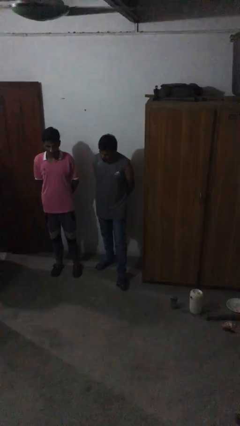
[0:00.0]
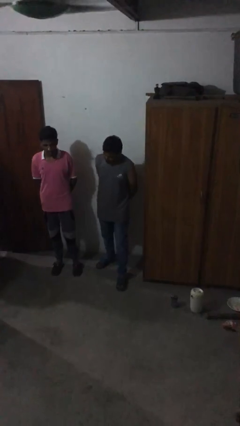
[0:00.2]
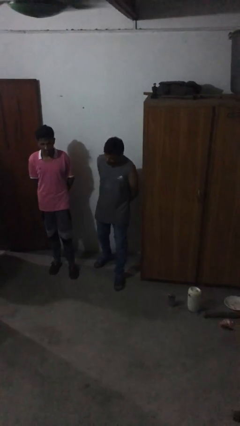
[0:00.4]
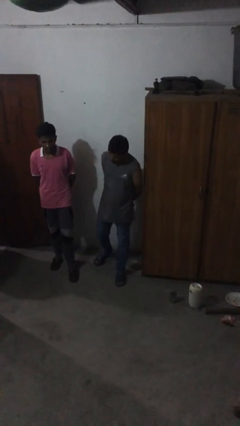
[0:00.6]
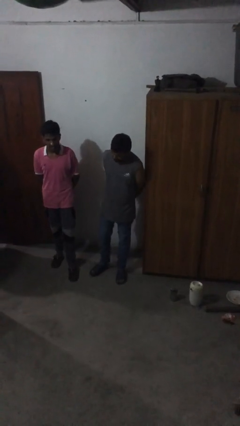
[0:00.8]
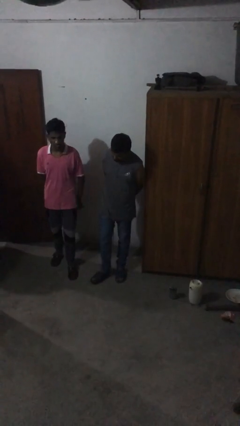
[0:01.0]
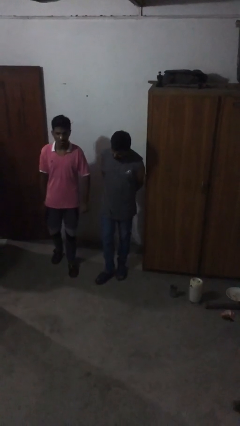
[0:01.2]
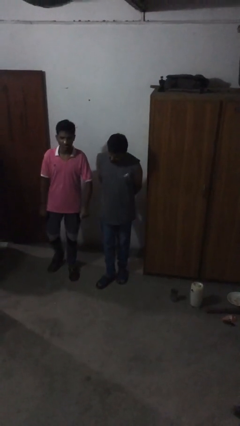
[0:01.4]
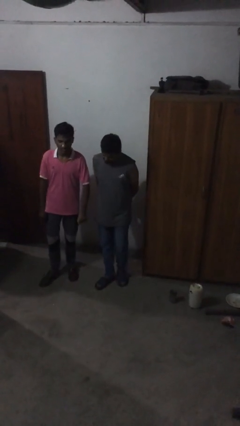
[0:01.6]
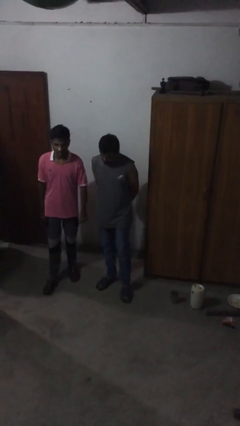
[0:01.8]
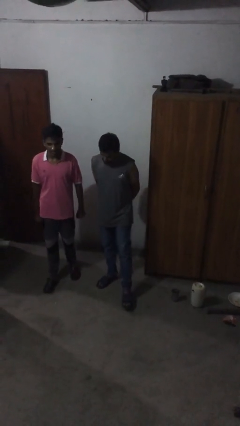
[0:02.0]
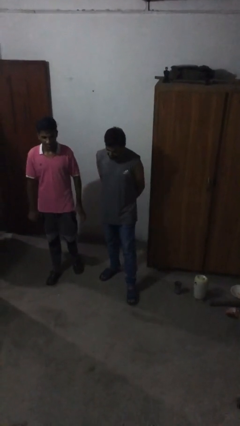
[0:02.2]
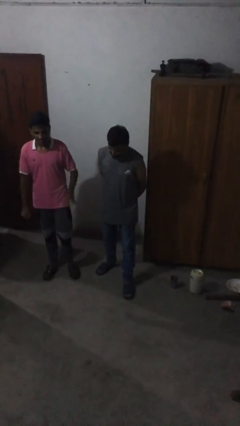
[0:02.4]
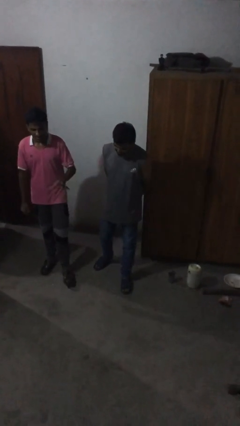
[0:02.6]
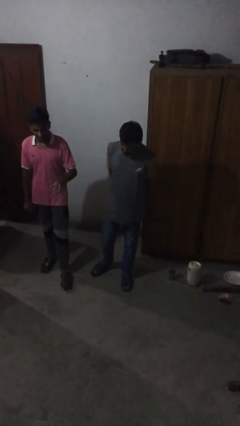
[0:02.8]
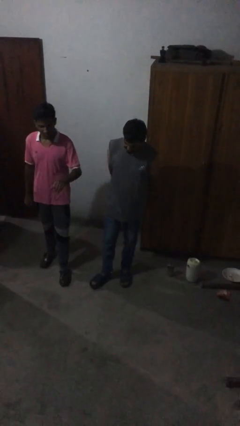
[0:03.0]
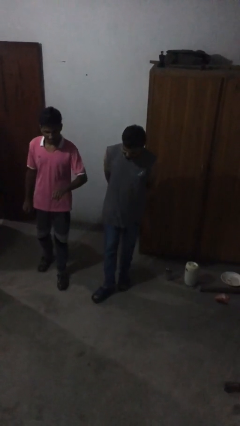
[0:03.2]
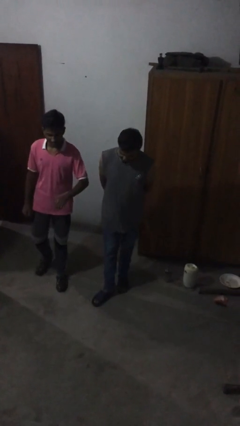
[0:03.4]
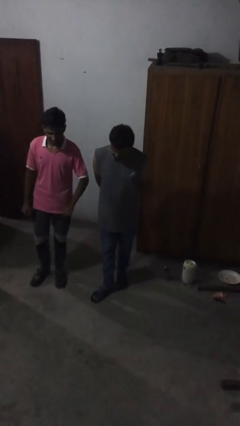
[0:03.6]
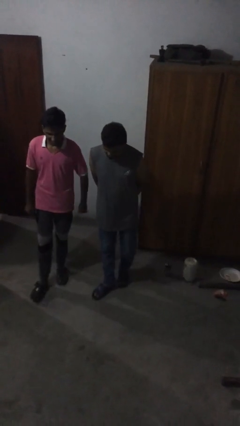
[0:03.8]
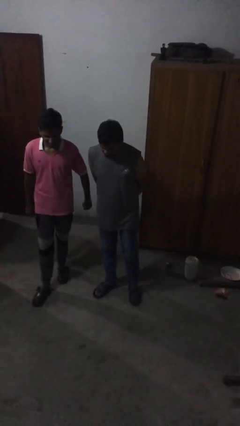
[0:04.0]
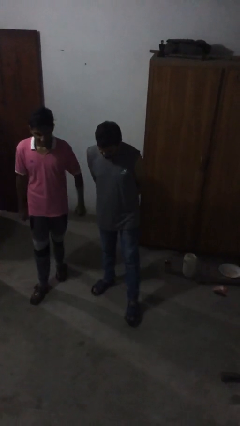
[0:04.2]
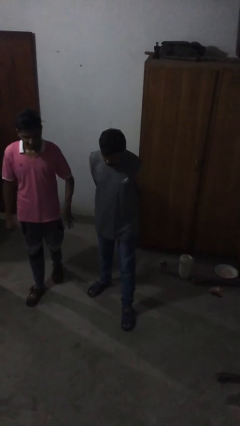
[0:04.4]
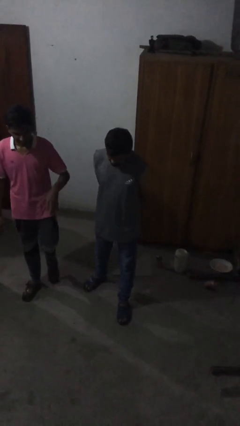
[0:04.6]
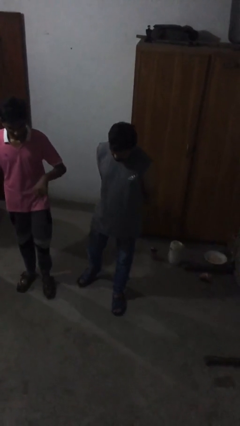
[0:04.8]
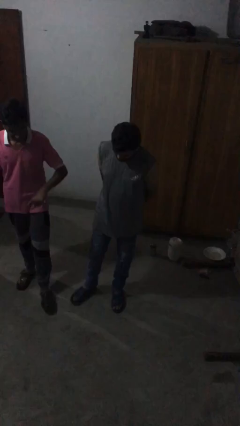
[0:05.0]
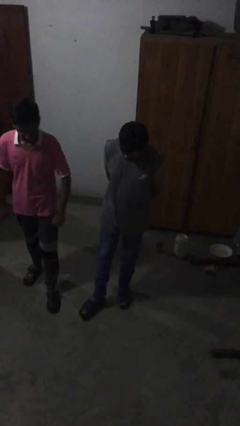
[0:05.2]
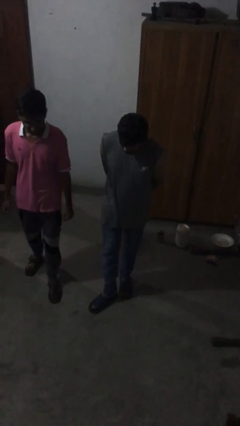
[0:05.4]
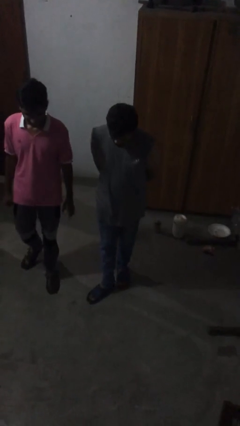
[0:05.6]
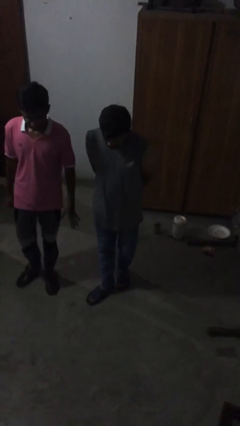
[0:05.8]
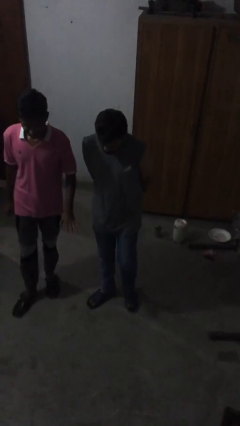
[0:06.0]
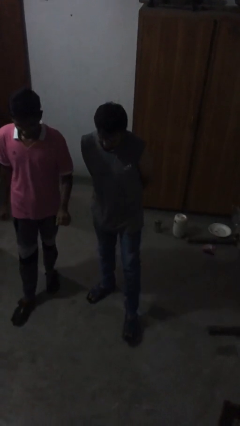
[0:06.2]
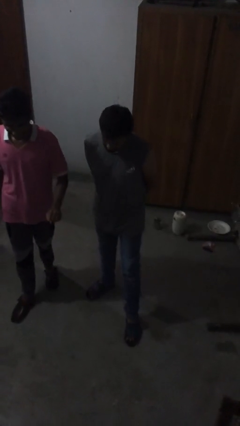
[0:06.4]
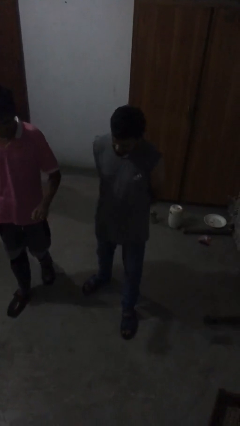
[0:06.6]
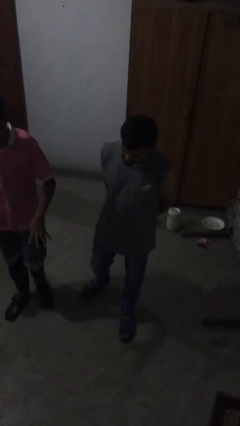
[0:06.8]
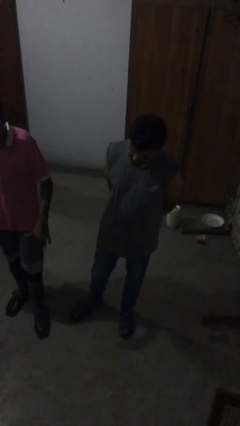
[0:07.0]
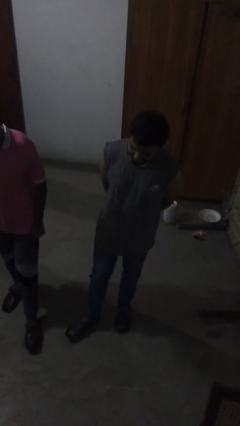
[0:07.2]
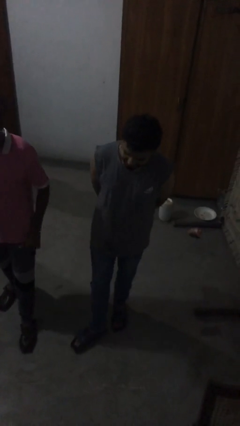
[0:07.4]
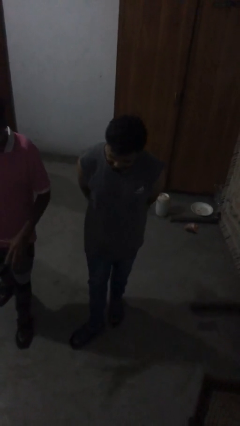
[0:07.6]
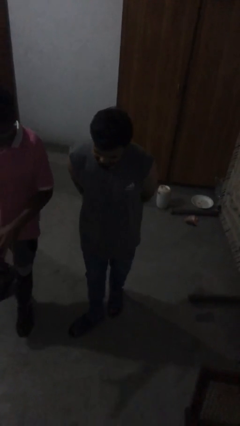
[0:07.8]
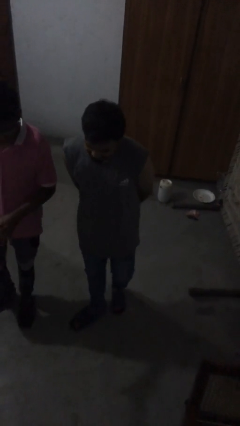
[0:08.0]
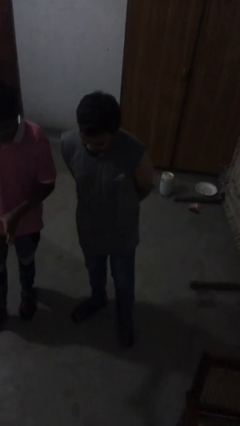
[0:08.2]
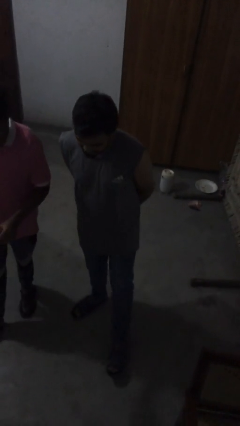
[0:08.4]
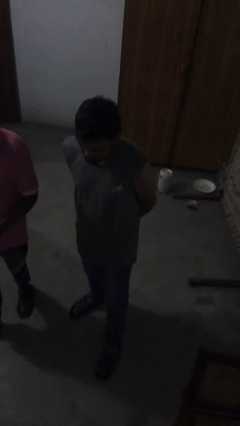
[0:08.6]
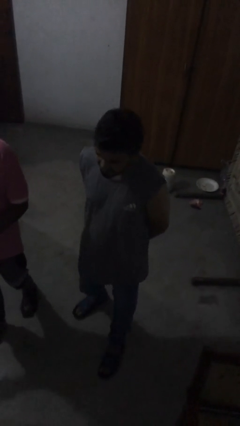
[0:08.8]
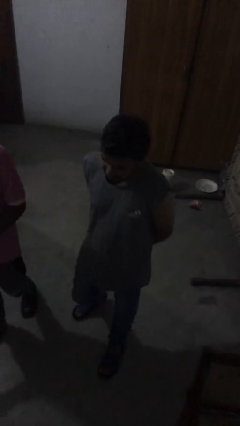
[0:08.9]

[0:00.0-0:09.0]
person talks to person

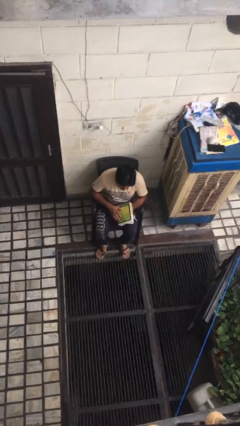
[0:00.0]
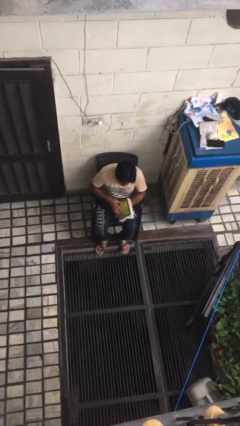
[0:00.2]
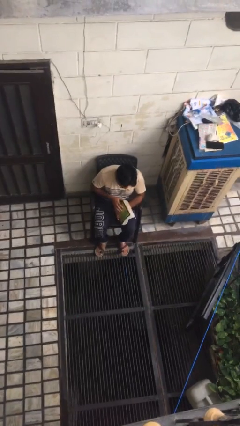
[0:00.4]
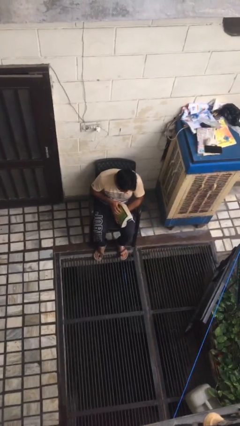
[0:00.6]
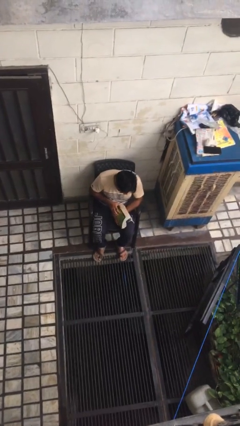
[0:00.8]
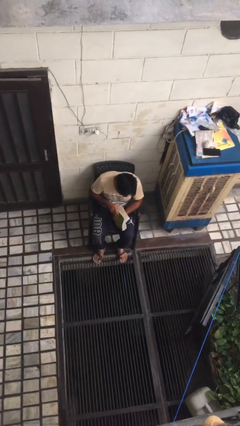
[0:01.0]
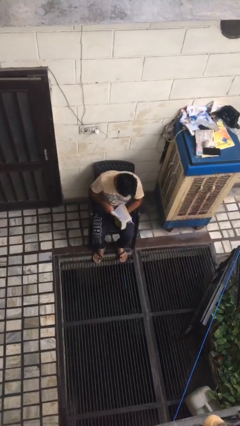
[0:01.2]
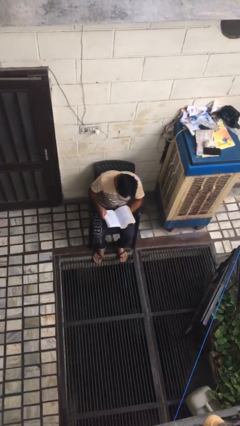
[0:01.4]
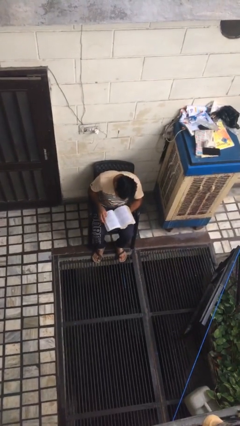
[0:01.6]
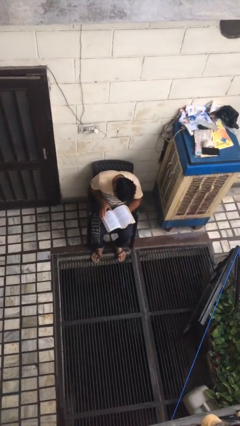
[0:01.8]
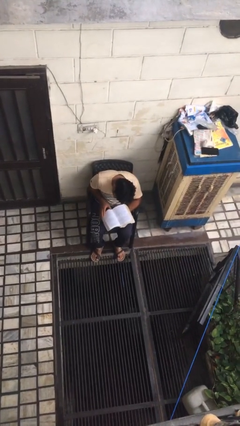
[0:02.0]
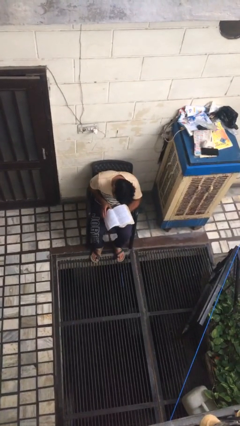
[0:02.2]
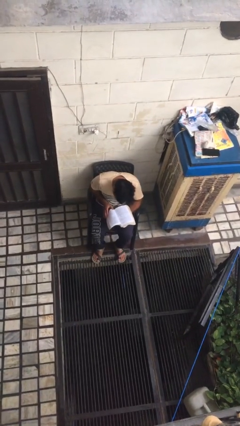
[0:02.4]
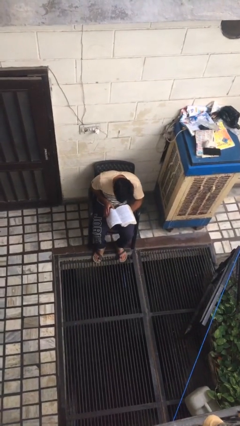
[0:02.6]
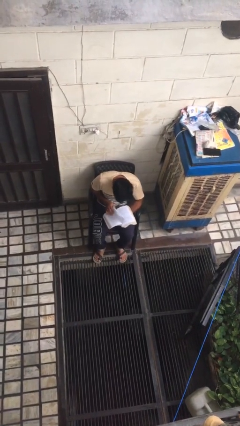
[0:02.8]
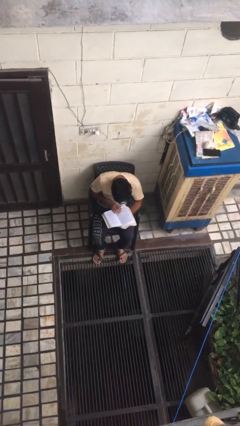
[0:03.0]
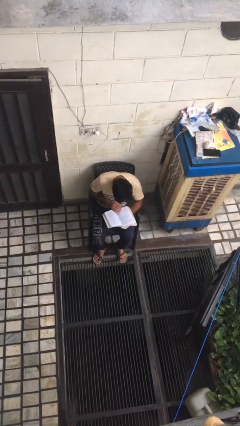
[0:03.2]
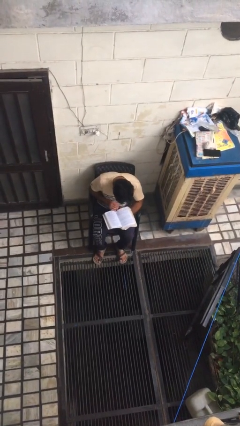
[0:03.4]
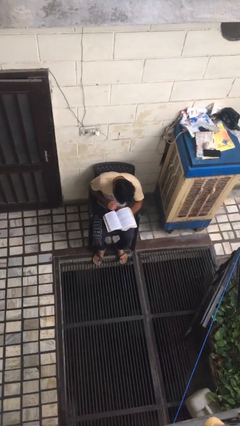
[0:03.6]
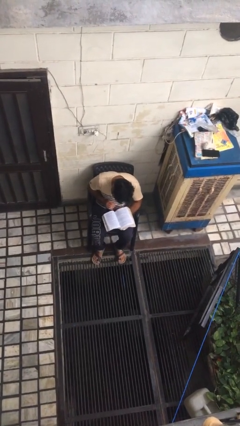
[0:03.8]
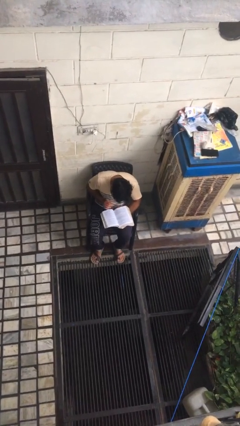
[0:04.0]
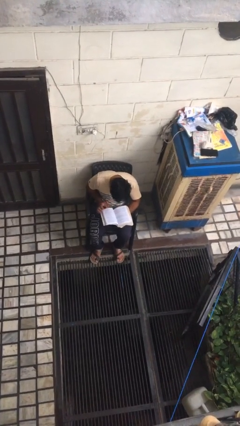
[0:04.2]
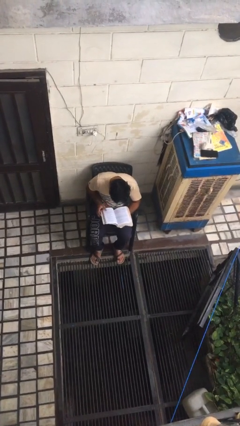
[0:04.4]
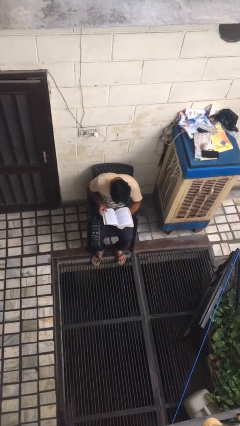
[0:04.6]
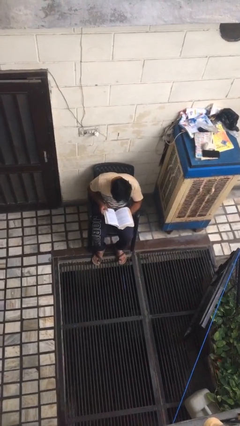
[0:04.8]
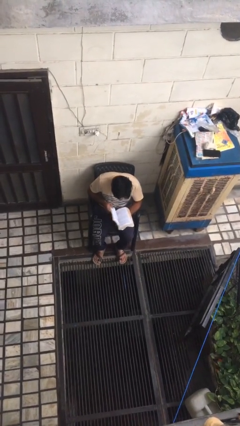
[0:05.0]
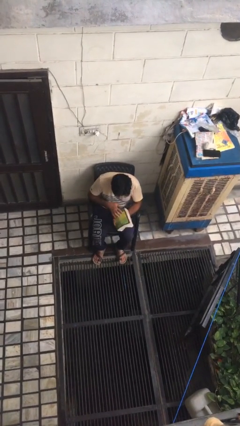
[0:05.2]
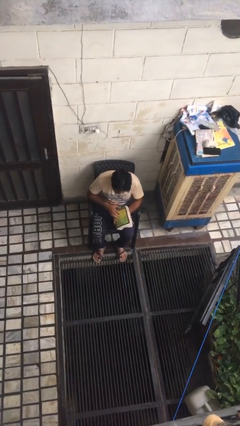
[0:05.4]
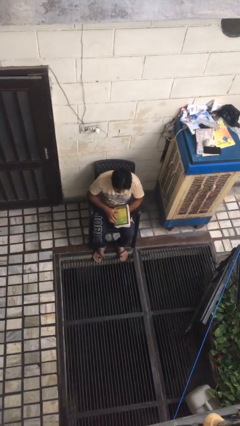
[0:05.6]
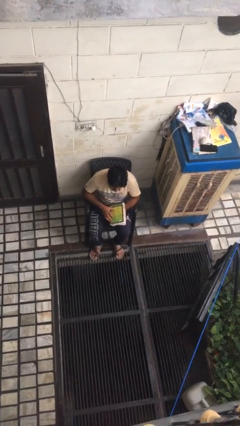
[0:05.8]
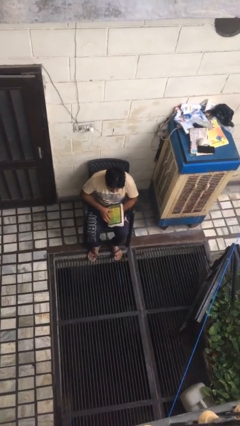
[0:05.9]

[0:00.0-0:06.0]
person reads book

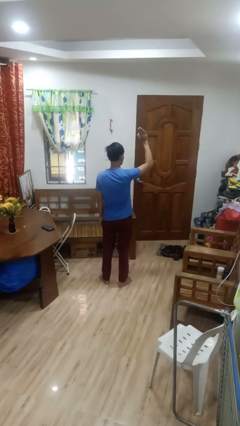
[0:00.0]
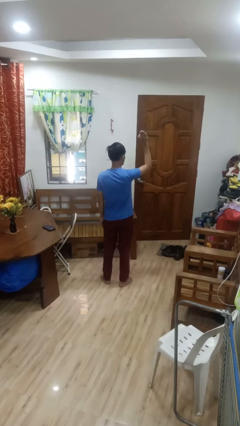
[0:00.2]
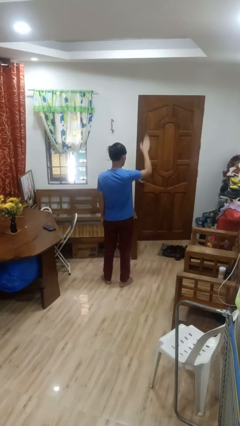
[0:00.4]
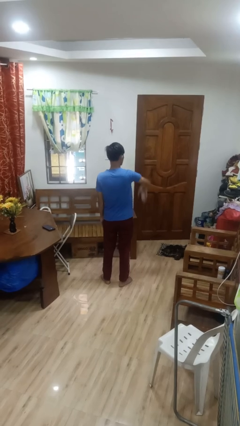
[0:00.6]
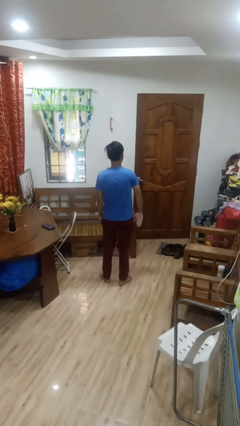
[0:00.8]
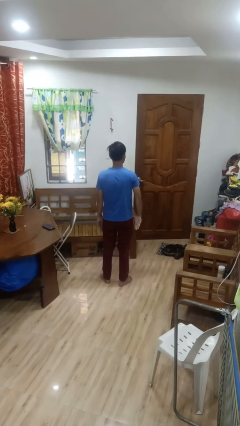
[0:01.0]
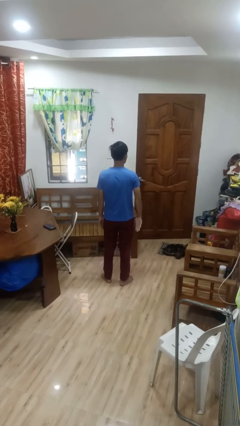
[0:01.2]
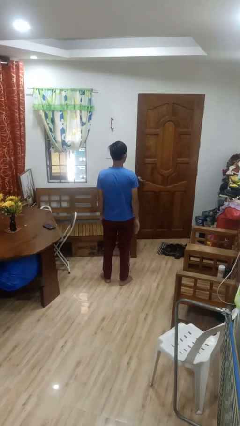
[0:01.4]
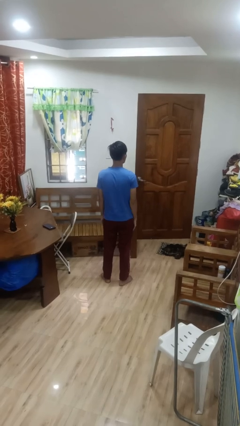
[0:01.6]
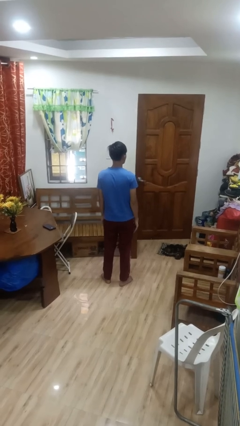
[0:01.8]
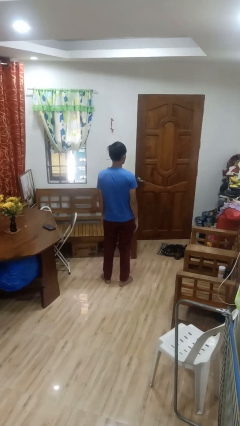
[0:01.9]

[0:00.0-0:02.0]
person gestures swipe down

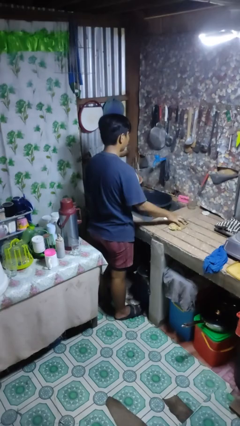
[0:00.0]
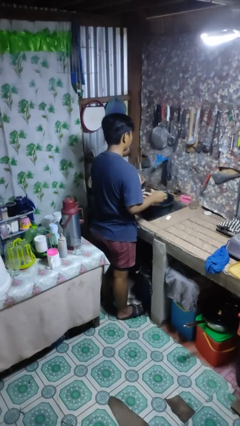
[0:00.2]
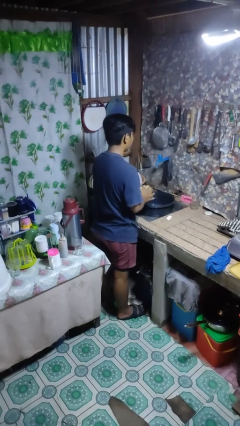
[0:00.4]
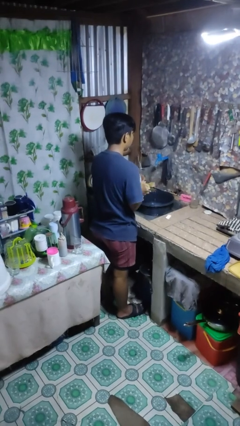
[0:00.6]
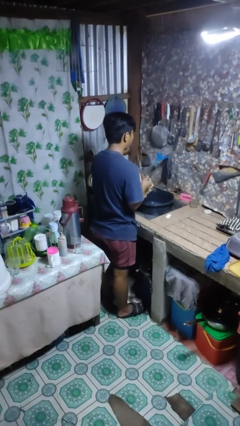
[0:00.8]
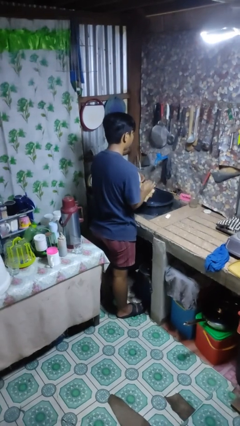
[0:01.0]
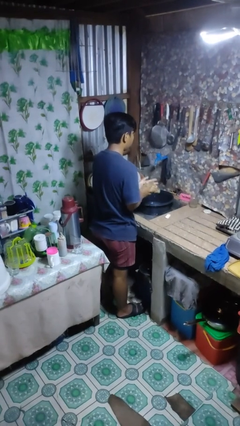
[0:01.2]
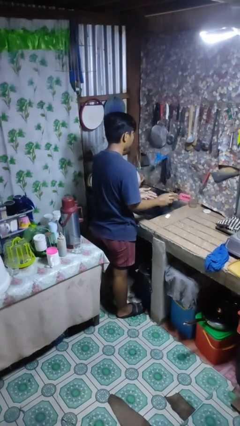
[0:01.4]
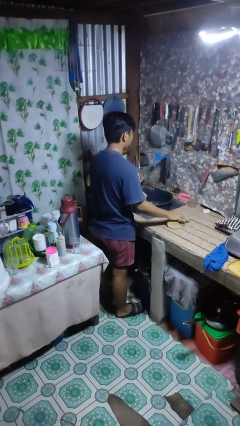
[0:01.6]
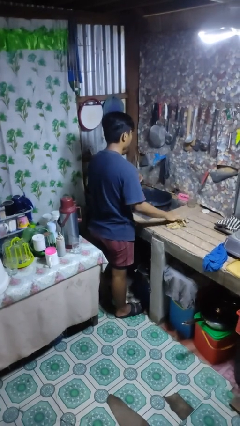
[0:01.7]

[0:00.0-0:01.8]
person dries hands with towel
